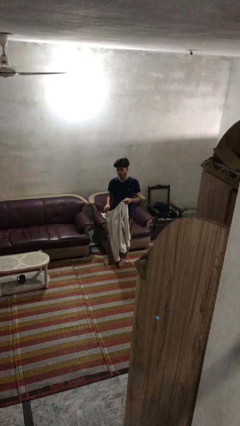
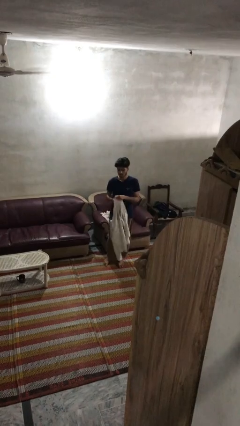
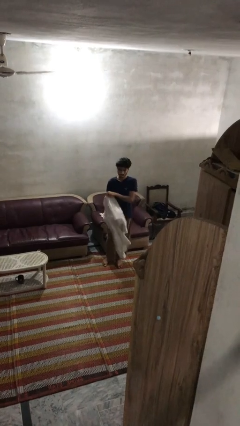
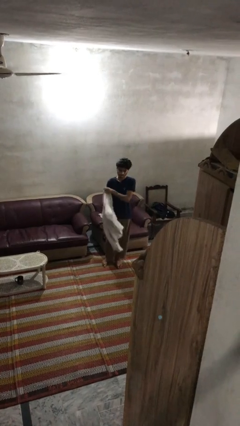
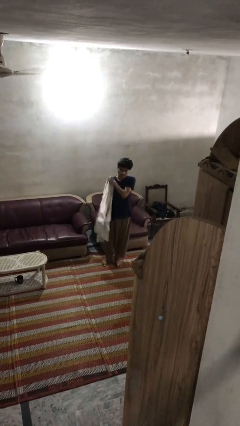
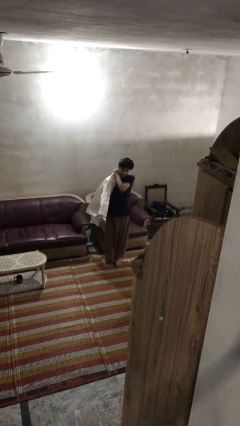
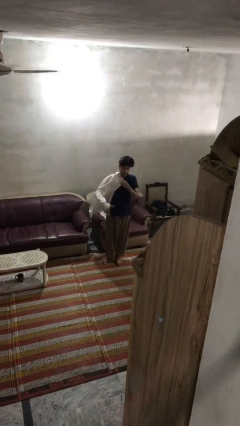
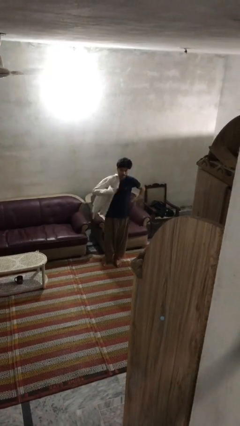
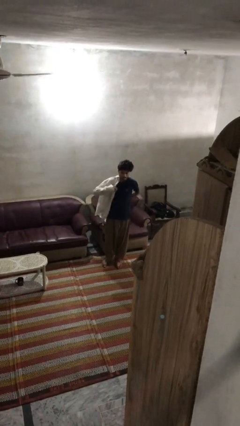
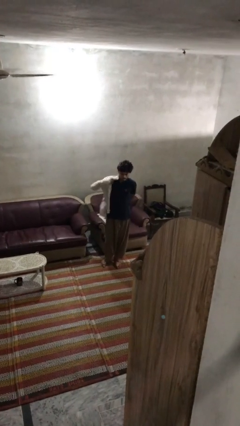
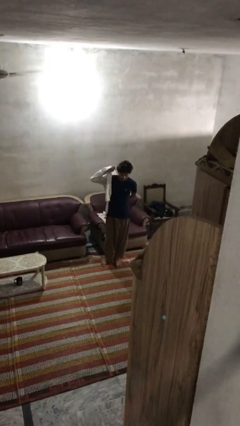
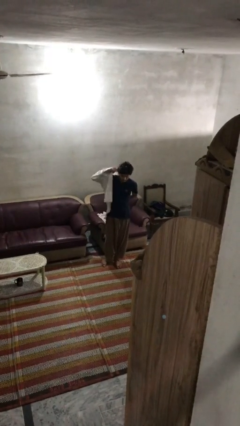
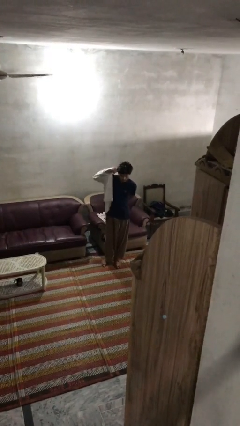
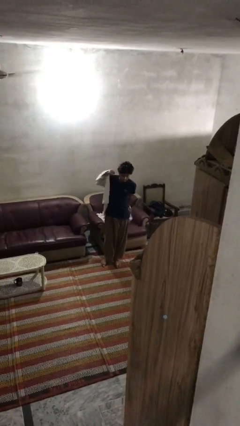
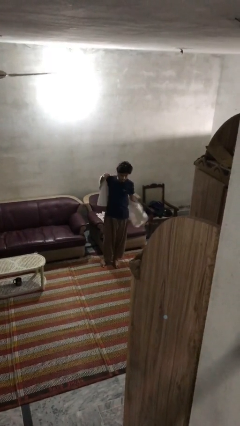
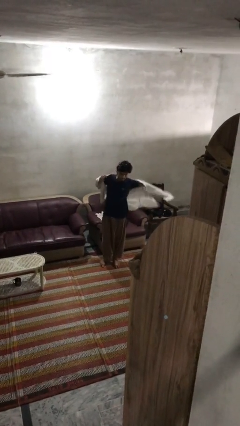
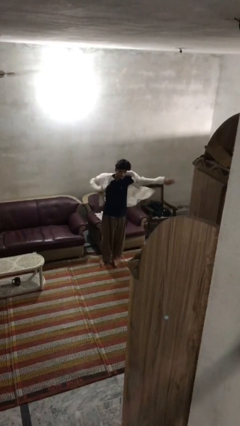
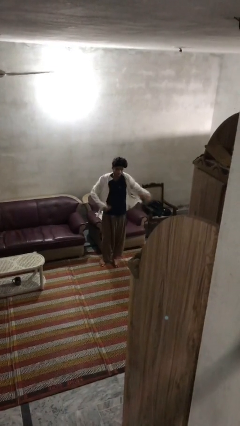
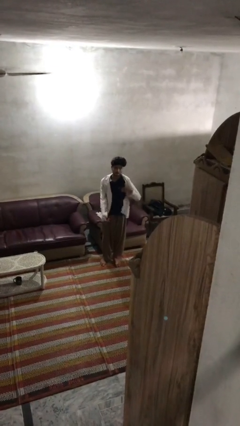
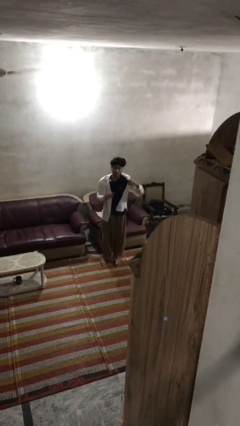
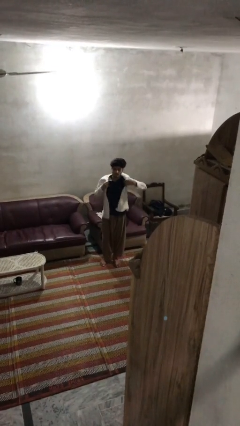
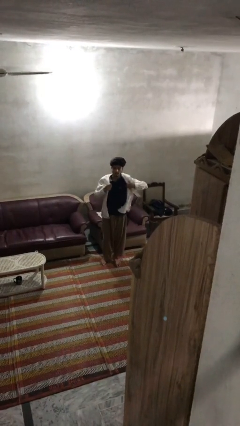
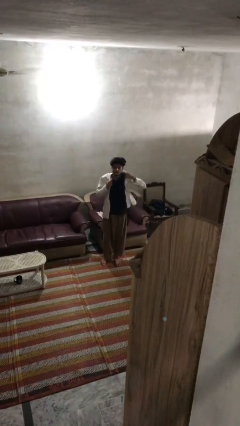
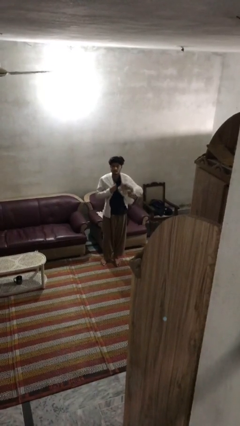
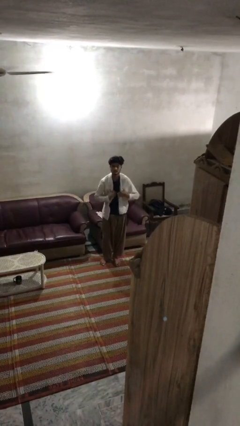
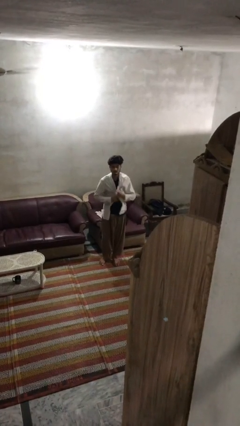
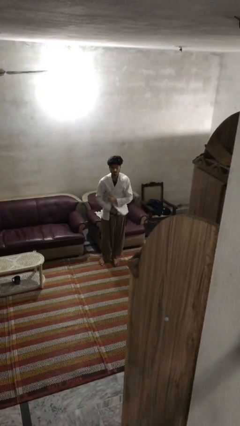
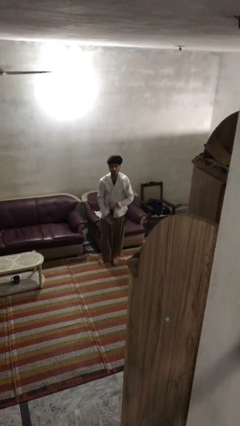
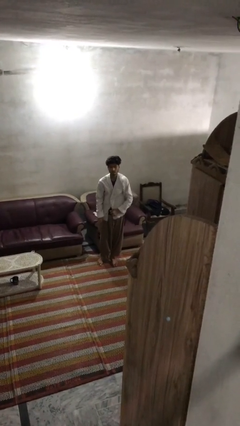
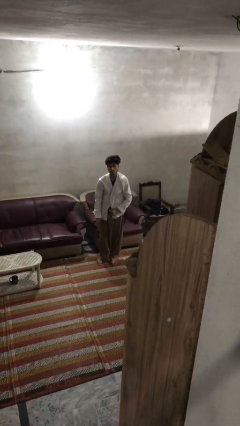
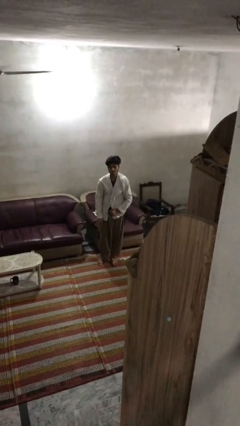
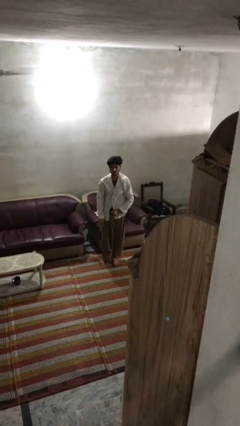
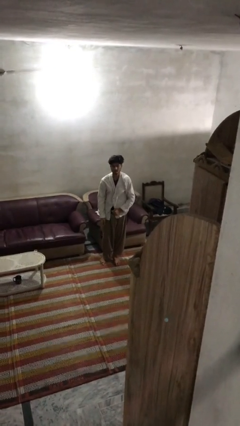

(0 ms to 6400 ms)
person puts on shirt

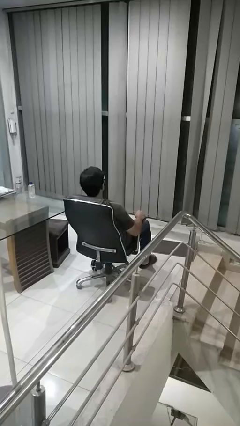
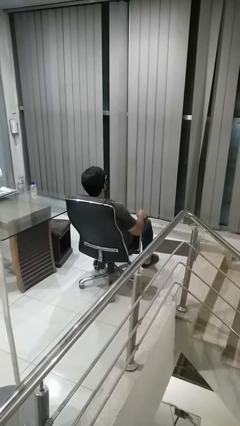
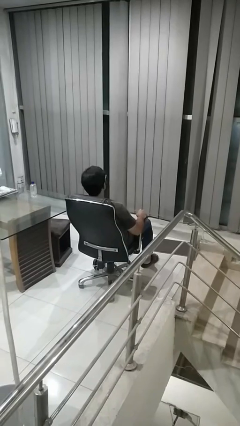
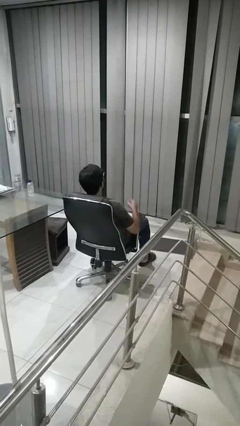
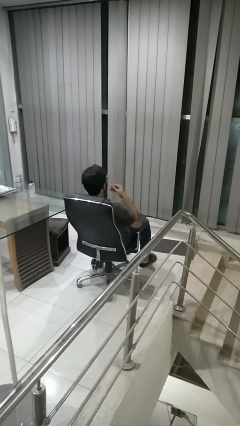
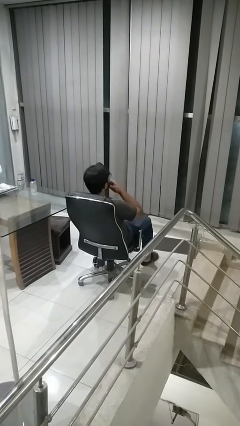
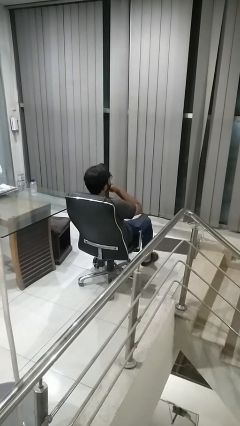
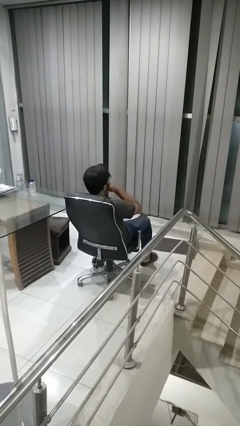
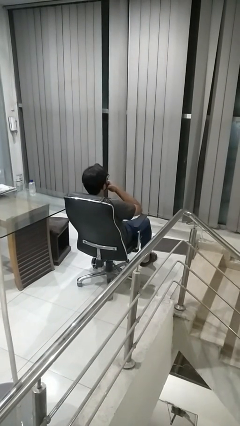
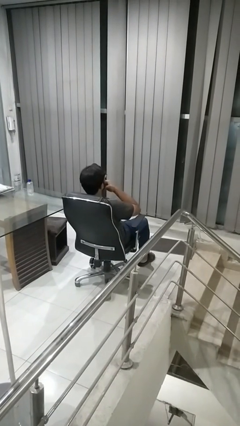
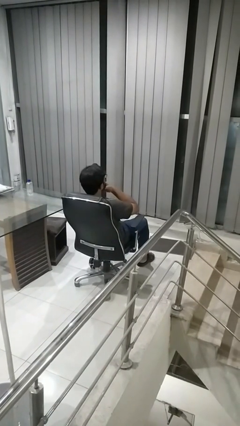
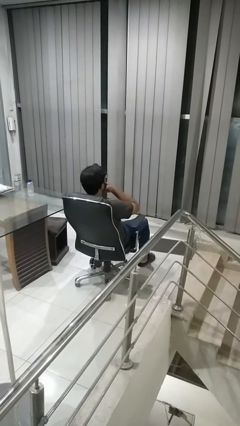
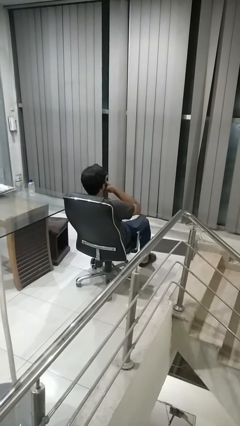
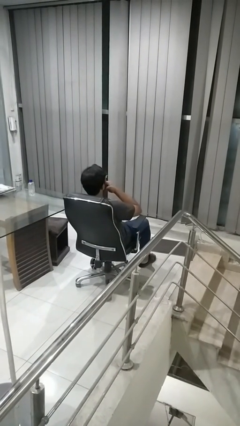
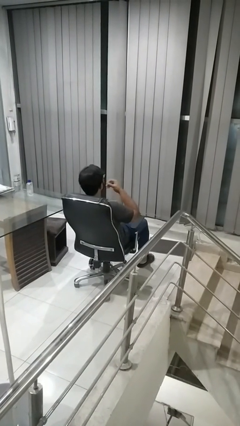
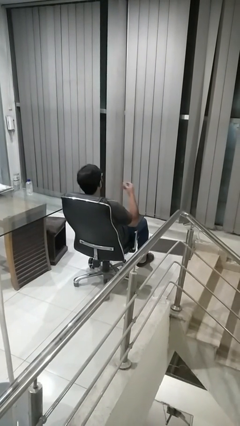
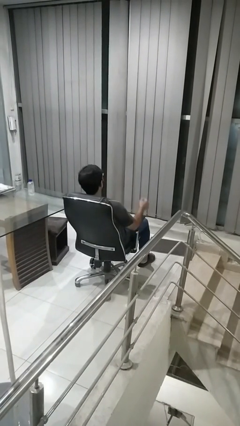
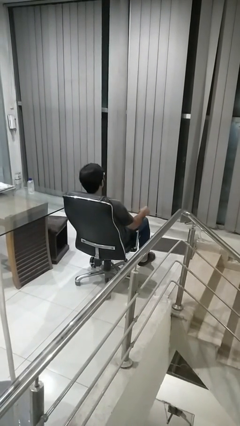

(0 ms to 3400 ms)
person strokes chin

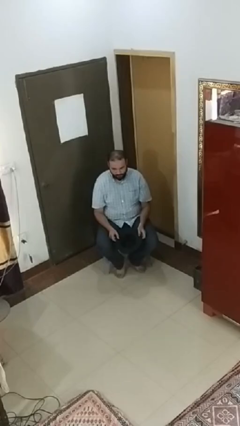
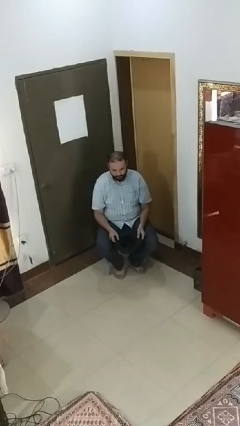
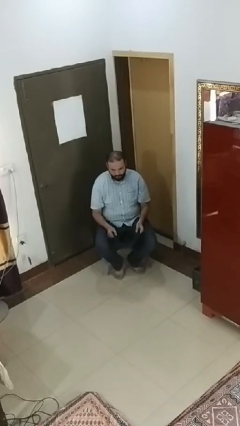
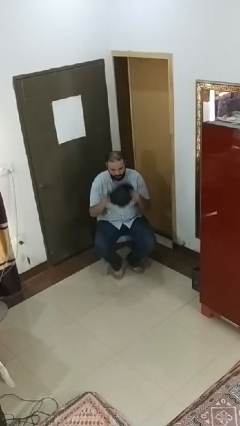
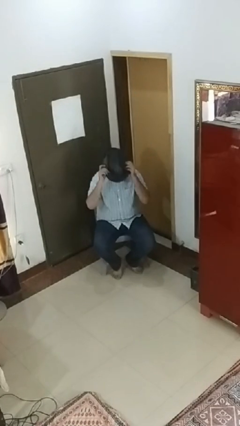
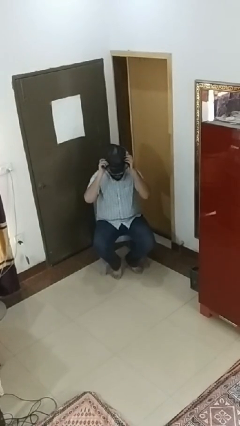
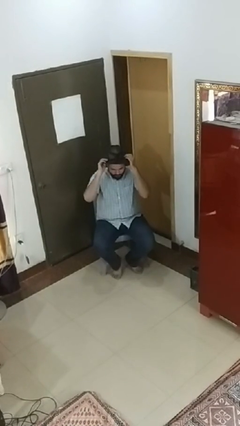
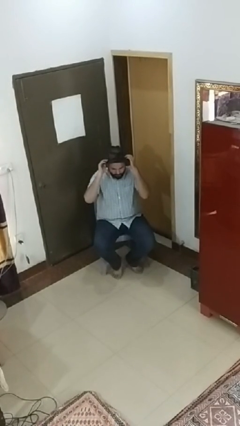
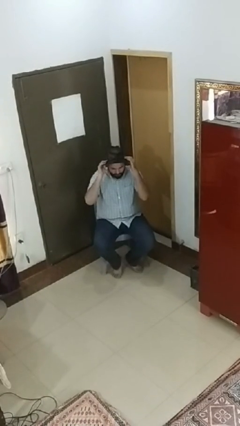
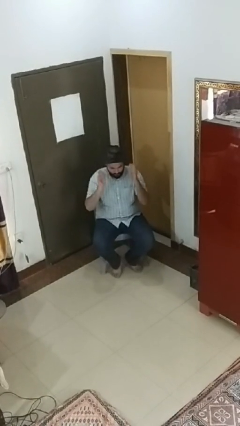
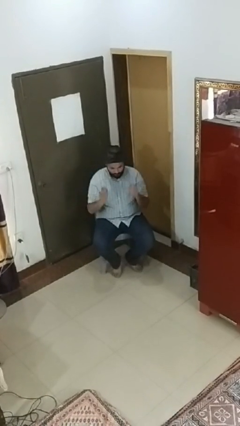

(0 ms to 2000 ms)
person puts on hat

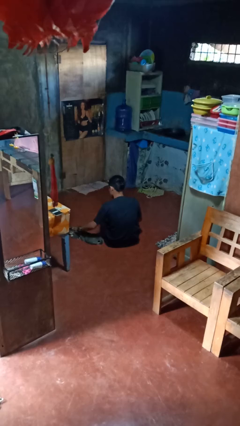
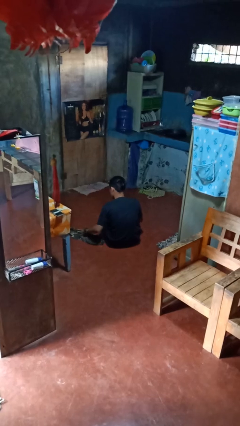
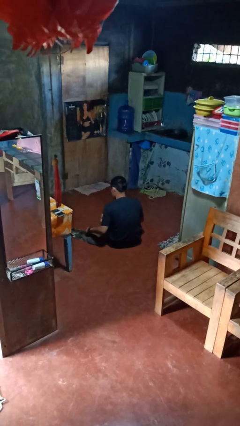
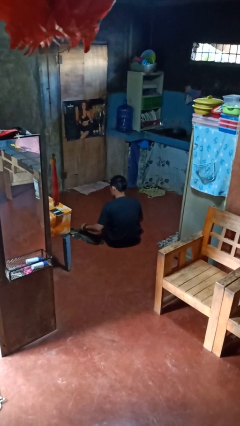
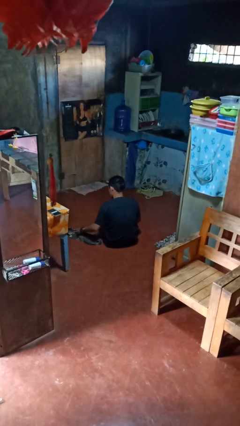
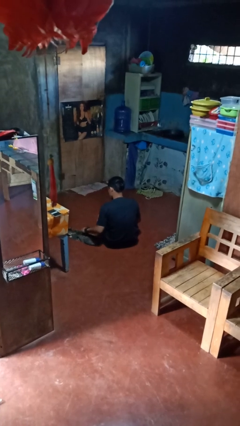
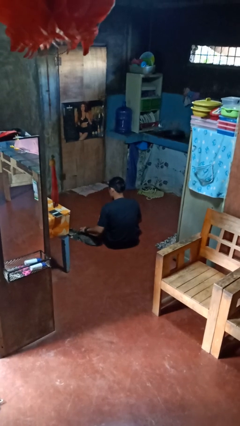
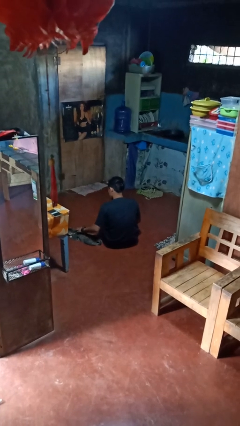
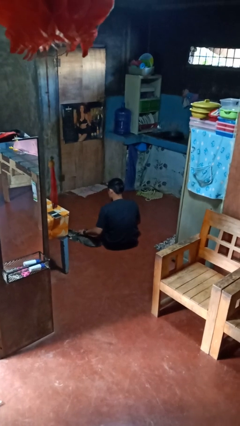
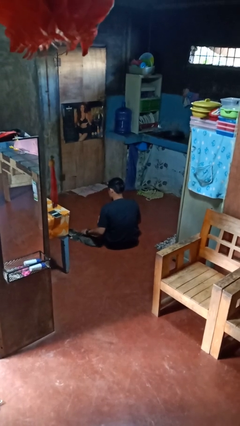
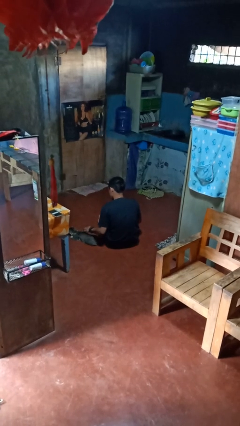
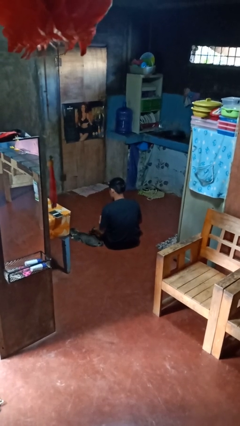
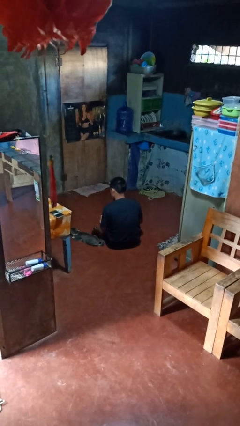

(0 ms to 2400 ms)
person pets cat

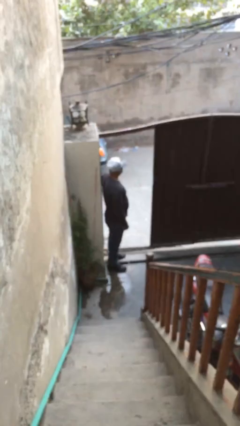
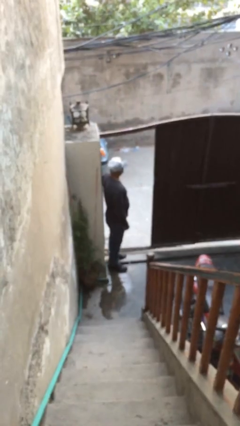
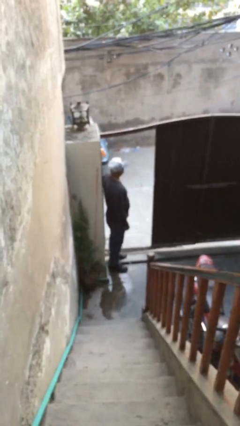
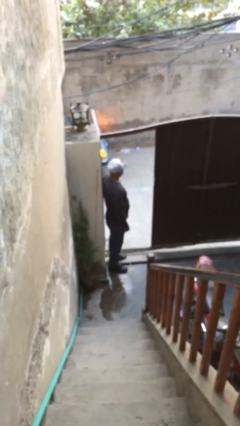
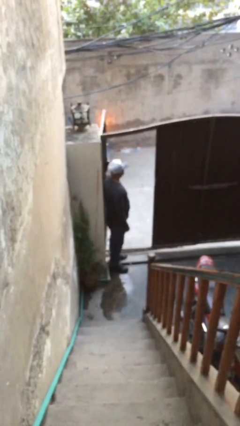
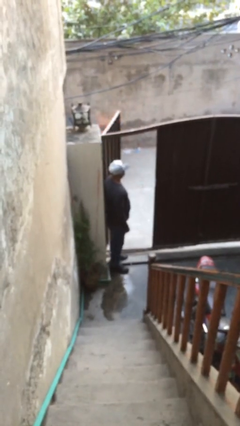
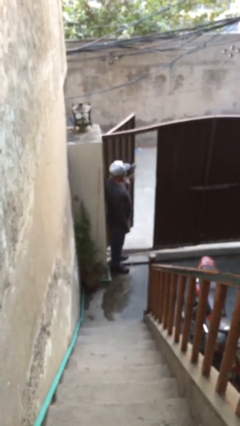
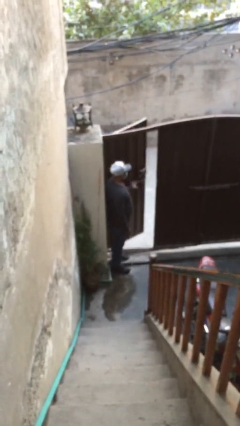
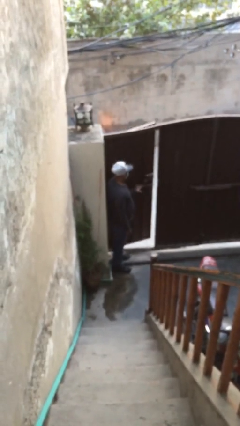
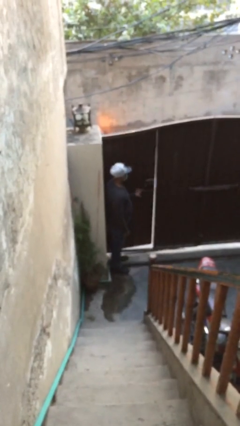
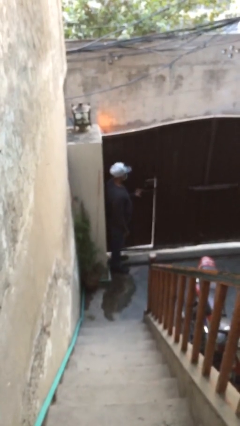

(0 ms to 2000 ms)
person closes facility door

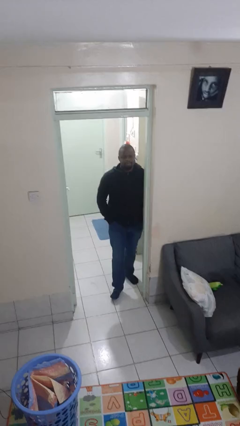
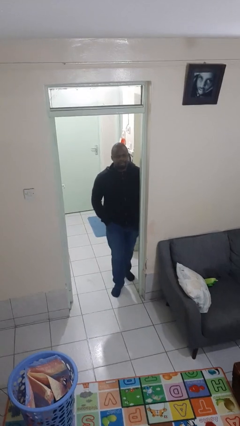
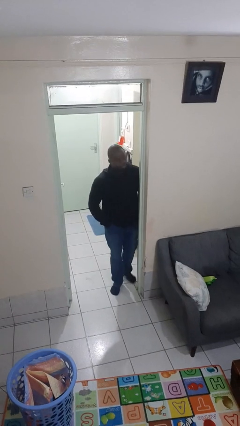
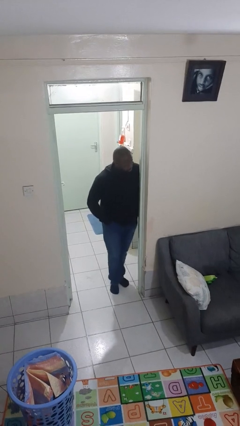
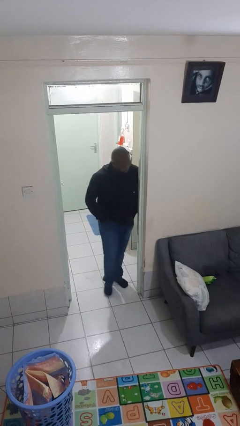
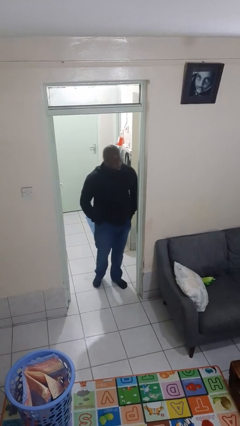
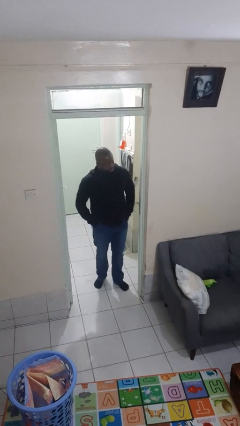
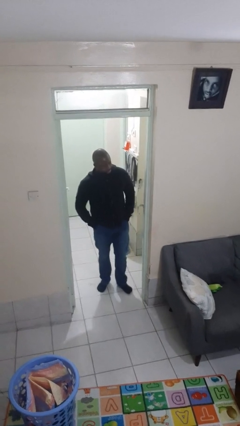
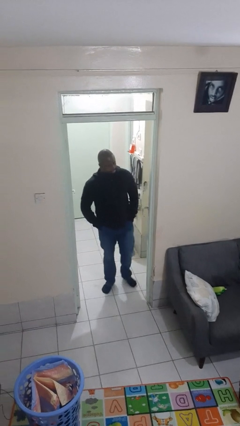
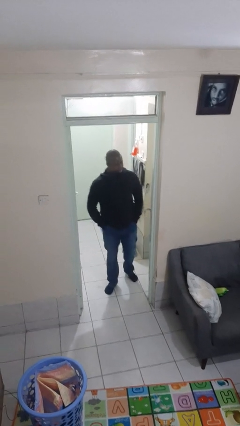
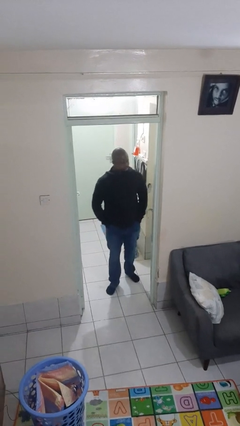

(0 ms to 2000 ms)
person bumps into wall
